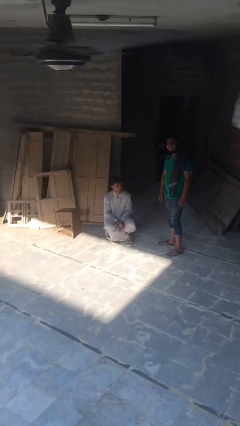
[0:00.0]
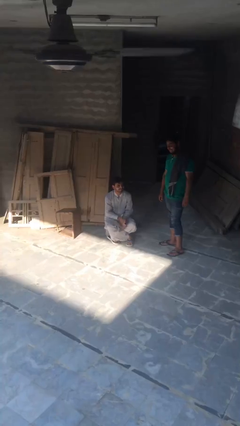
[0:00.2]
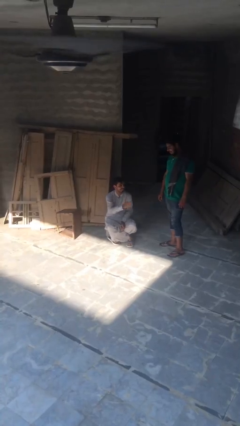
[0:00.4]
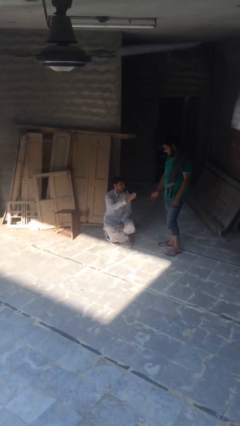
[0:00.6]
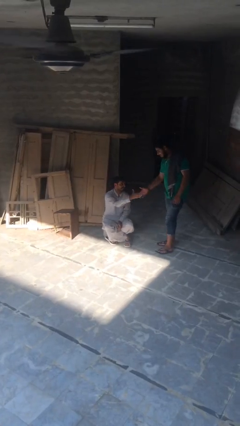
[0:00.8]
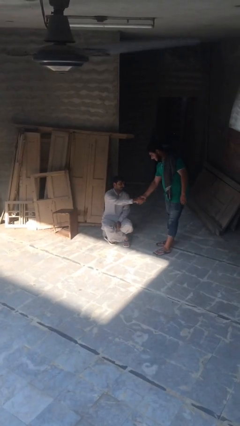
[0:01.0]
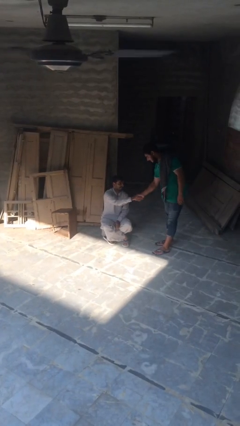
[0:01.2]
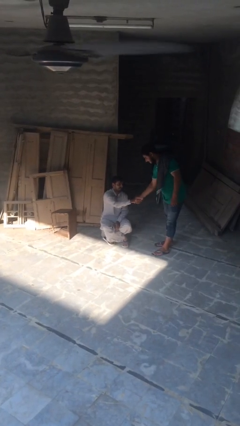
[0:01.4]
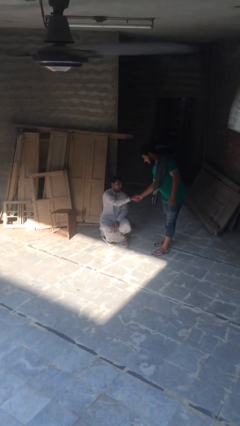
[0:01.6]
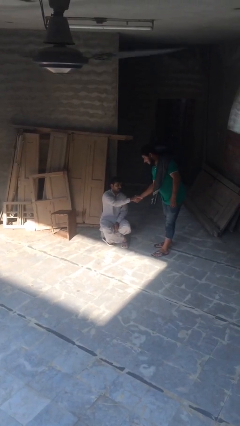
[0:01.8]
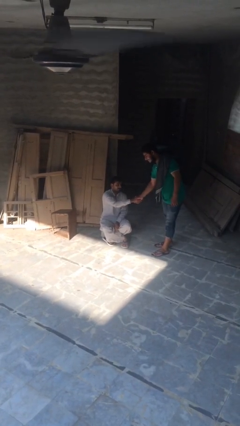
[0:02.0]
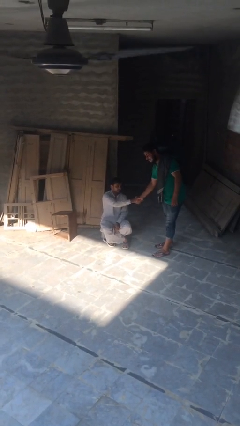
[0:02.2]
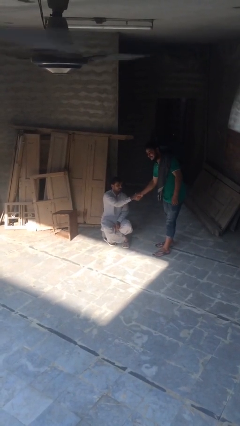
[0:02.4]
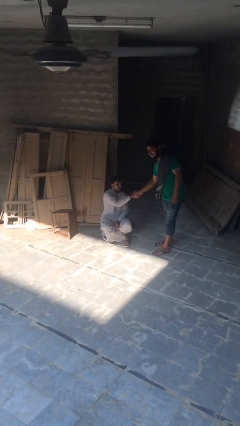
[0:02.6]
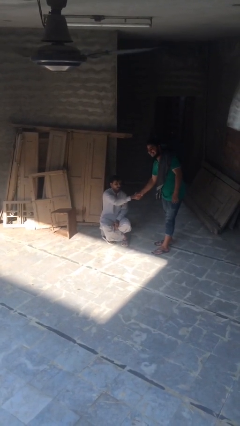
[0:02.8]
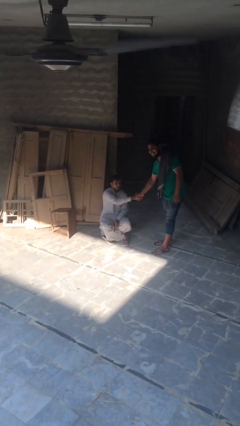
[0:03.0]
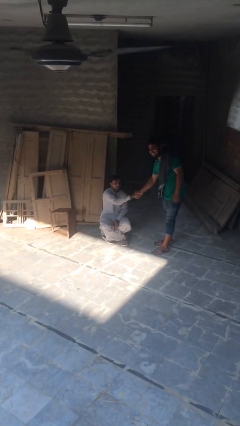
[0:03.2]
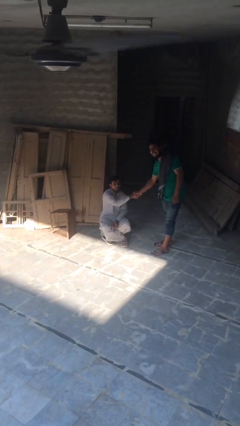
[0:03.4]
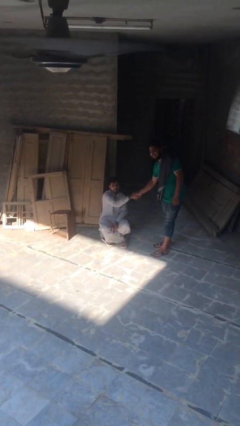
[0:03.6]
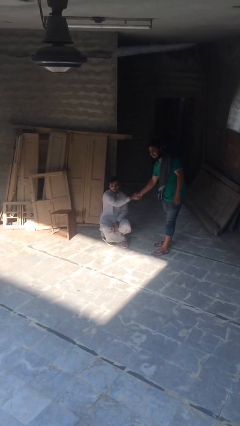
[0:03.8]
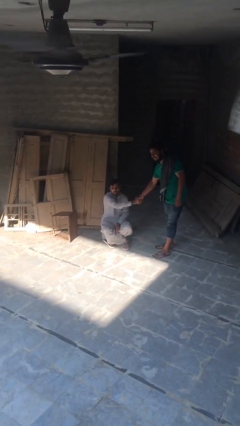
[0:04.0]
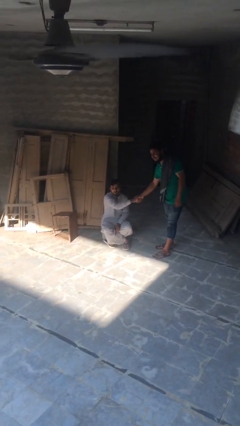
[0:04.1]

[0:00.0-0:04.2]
person shakes hand

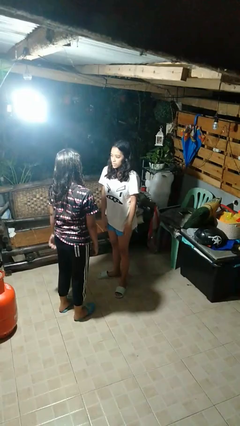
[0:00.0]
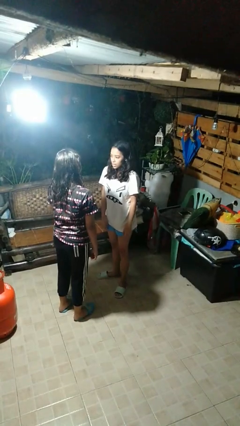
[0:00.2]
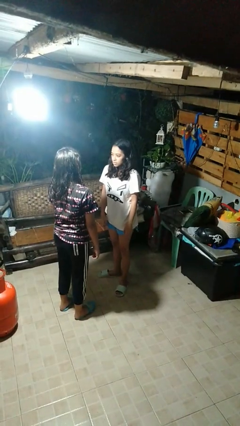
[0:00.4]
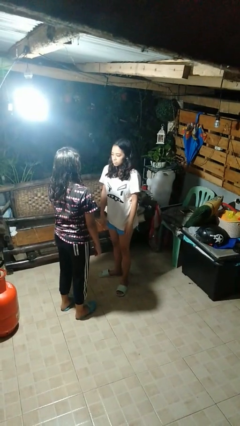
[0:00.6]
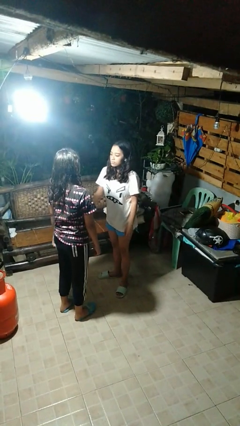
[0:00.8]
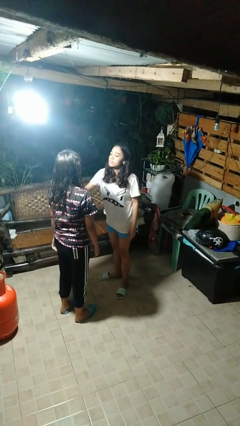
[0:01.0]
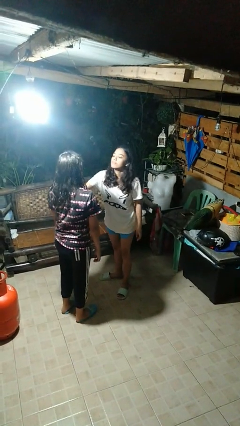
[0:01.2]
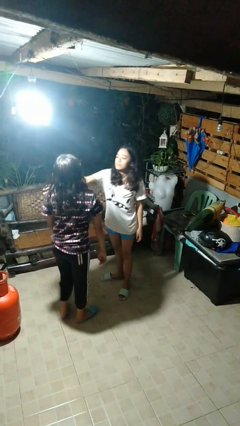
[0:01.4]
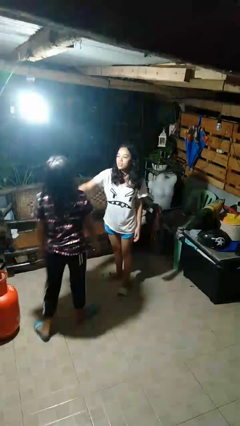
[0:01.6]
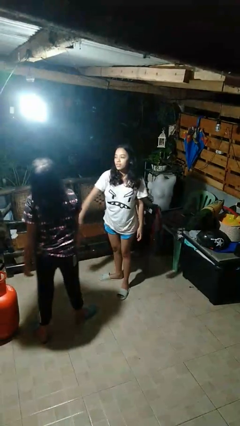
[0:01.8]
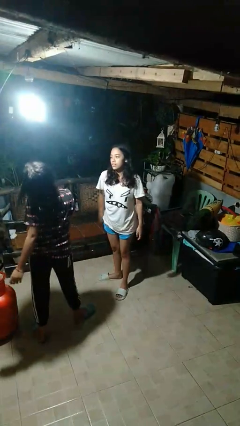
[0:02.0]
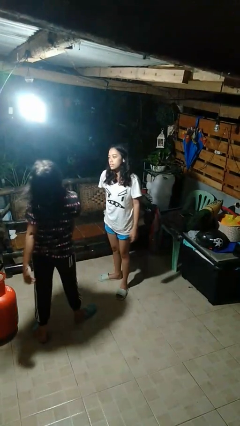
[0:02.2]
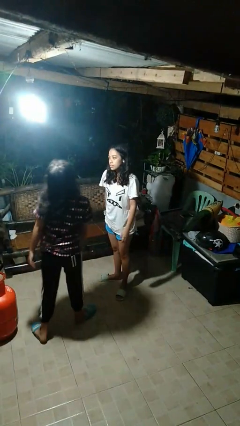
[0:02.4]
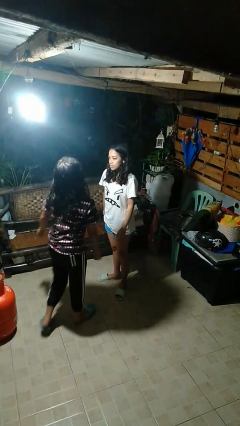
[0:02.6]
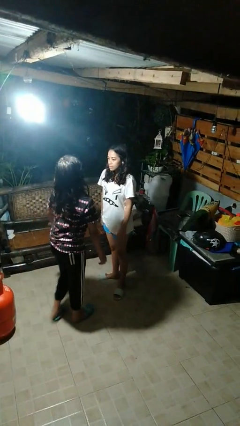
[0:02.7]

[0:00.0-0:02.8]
person shoves person

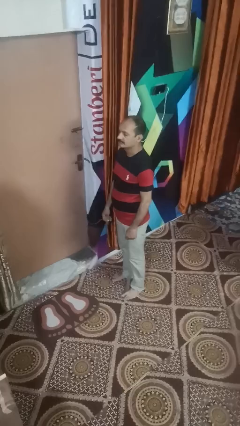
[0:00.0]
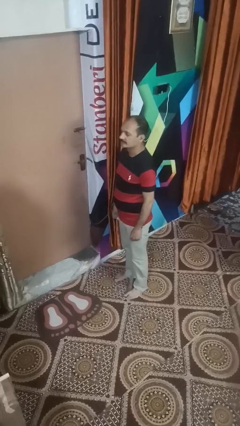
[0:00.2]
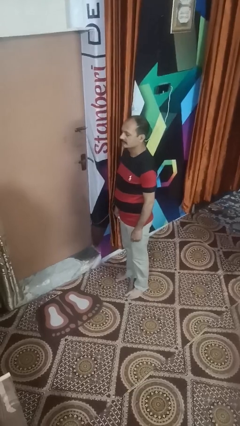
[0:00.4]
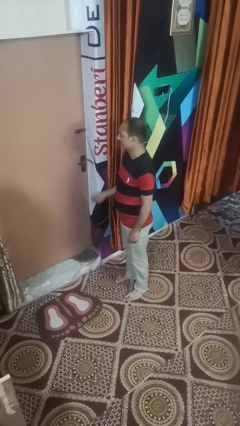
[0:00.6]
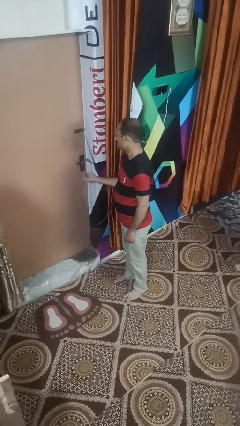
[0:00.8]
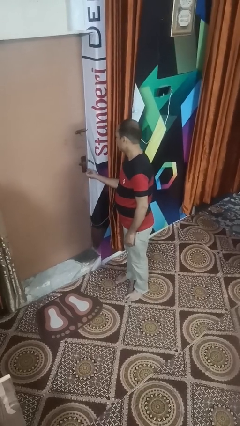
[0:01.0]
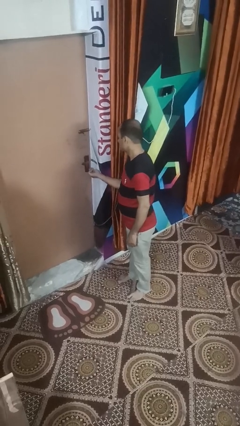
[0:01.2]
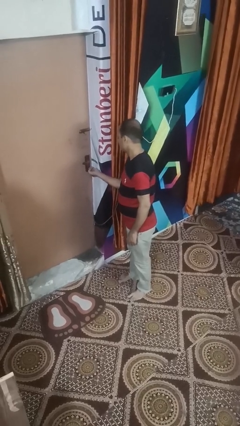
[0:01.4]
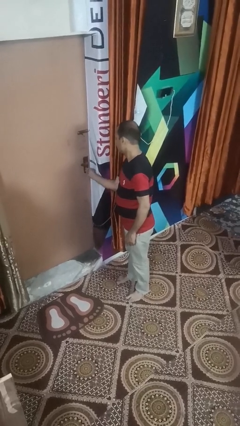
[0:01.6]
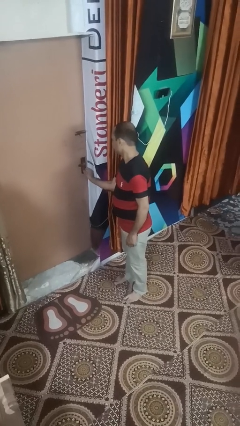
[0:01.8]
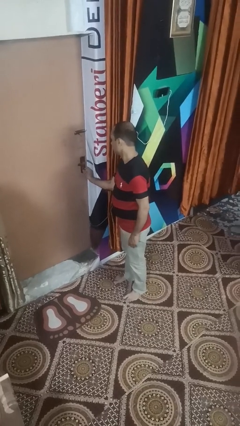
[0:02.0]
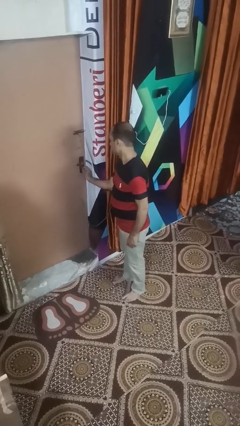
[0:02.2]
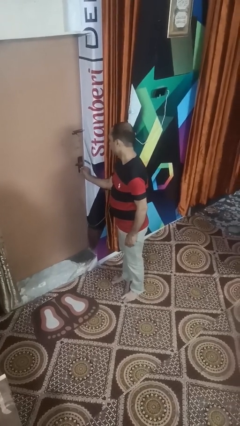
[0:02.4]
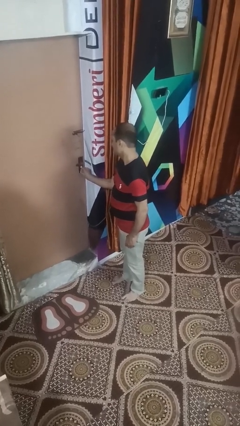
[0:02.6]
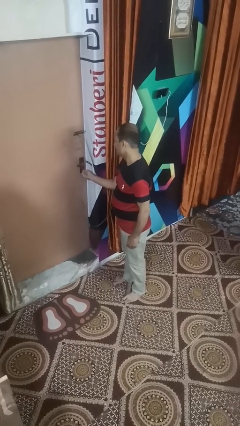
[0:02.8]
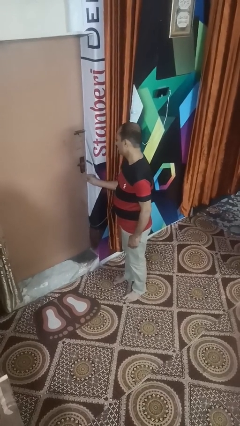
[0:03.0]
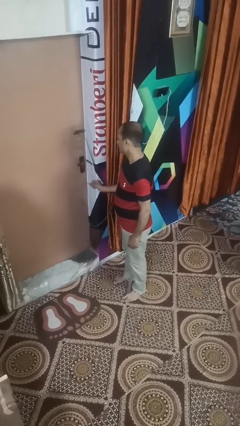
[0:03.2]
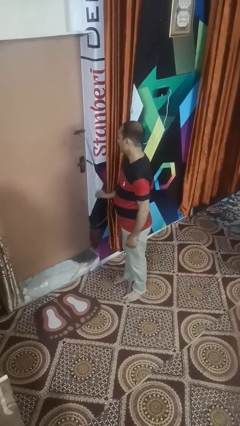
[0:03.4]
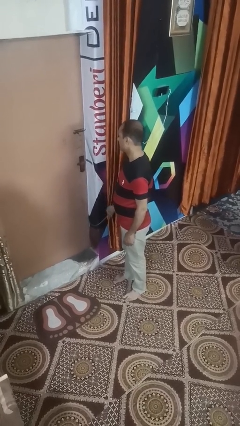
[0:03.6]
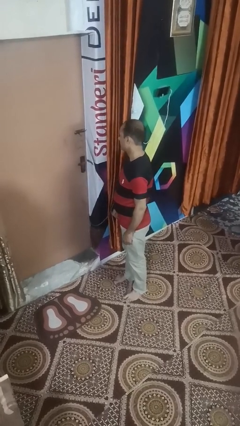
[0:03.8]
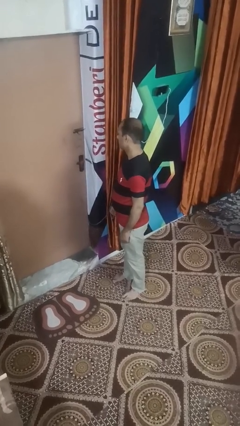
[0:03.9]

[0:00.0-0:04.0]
person unlocks door with keys

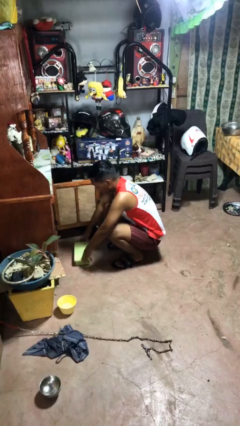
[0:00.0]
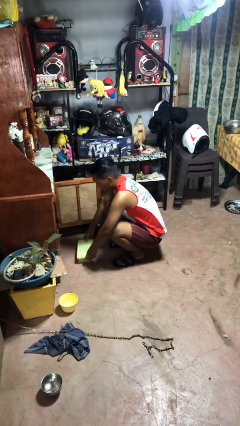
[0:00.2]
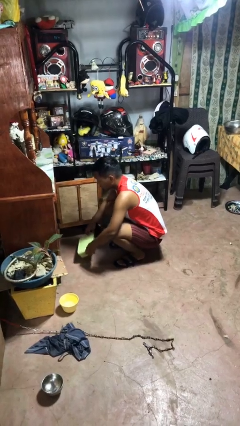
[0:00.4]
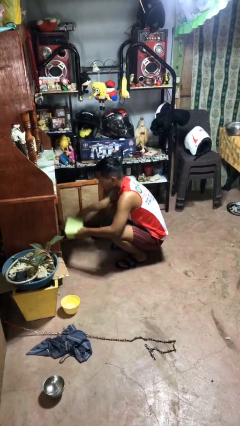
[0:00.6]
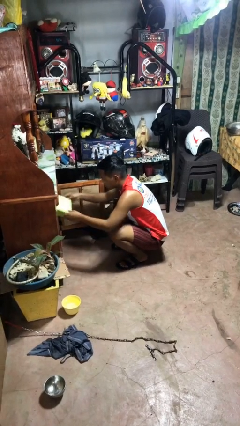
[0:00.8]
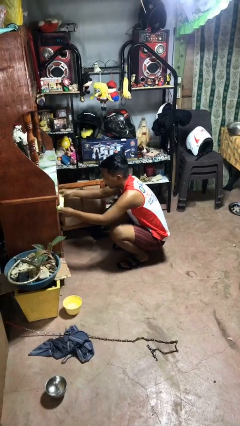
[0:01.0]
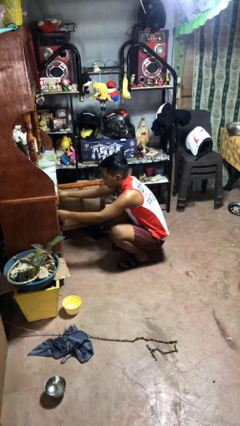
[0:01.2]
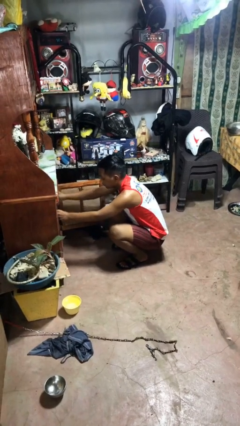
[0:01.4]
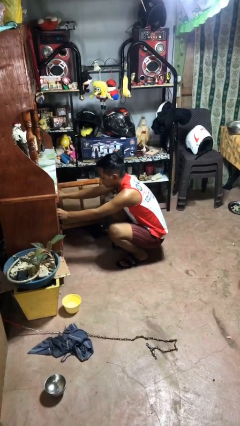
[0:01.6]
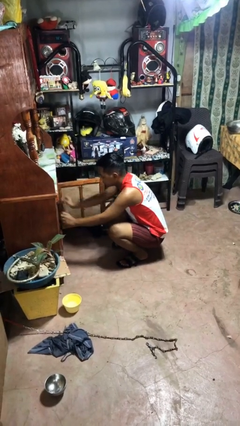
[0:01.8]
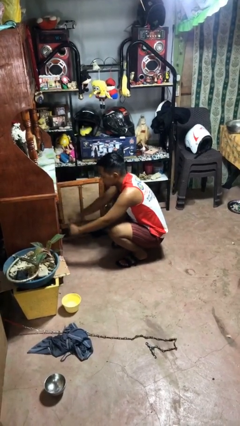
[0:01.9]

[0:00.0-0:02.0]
person puts object in cabinet

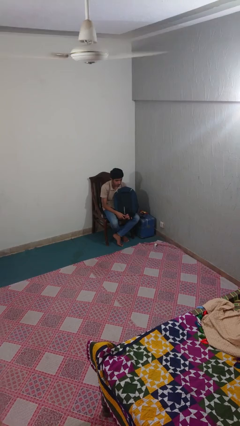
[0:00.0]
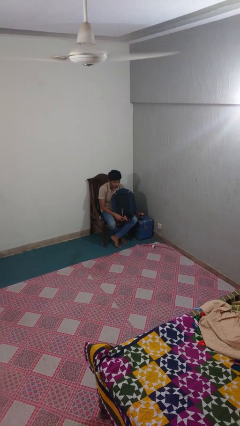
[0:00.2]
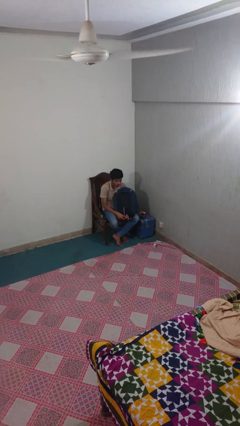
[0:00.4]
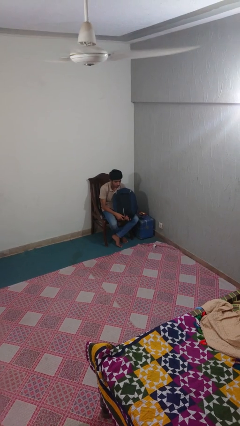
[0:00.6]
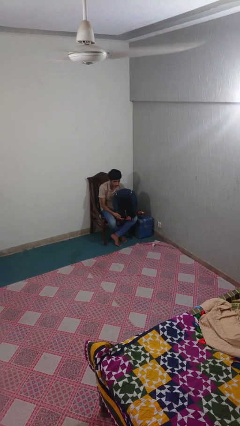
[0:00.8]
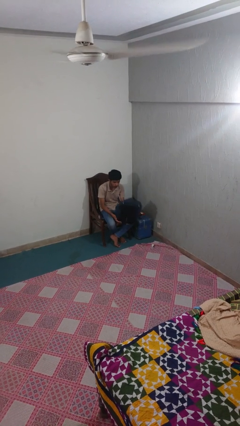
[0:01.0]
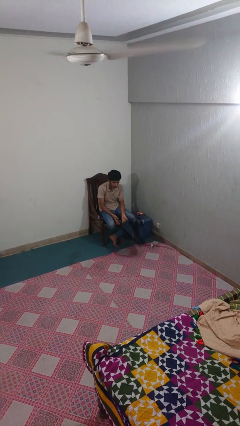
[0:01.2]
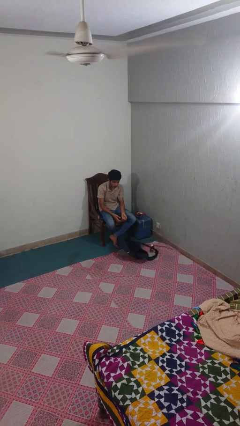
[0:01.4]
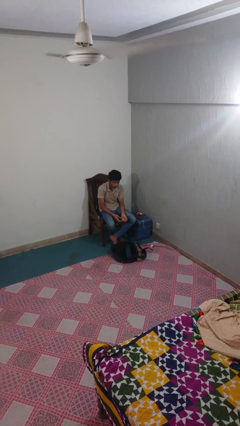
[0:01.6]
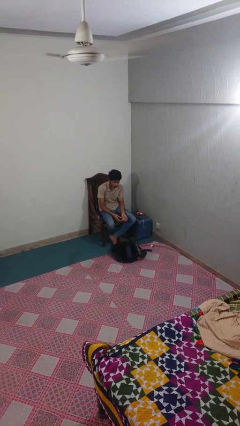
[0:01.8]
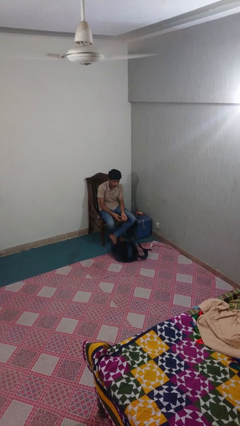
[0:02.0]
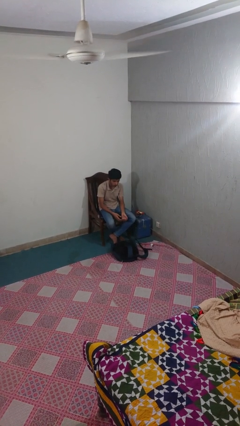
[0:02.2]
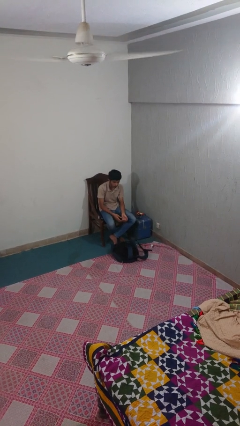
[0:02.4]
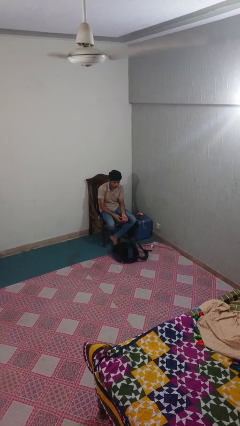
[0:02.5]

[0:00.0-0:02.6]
person drops object

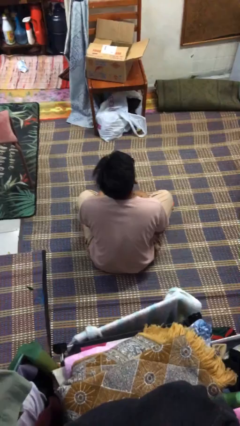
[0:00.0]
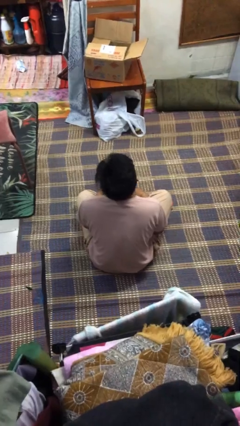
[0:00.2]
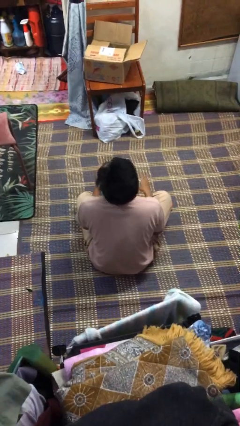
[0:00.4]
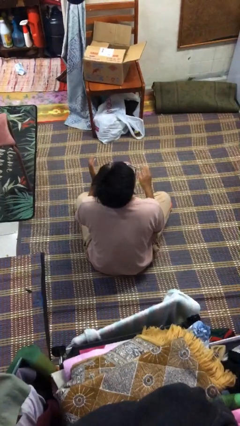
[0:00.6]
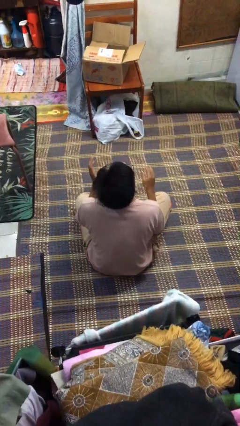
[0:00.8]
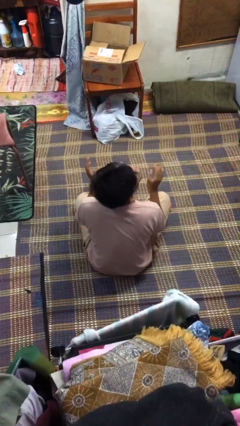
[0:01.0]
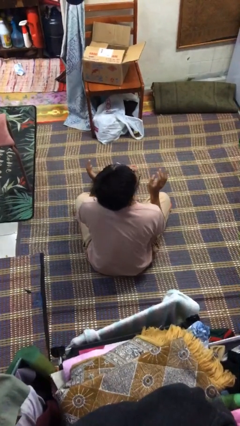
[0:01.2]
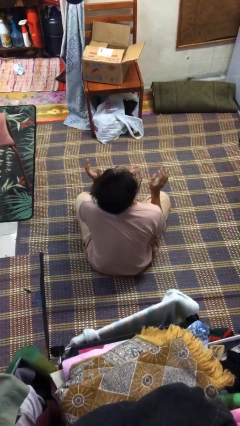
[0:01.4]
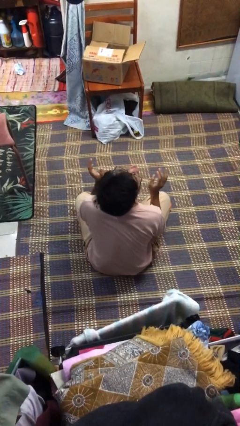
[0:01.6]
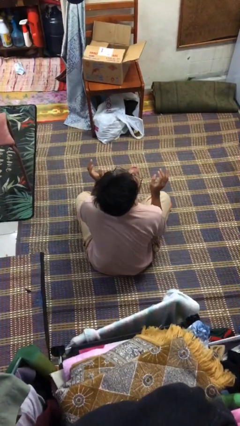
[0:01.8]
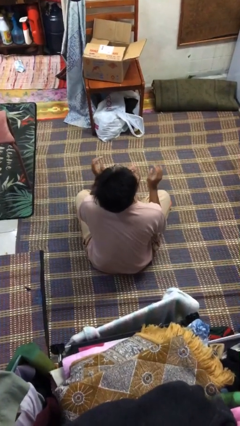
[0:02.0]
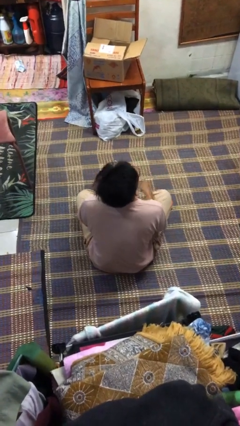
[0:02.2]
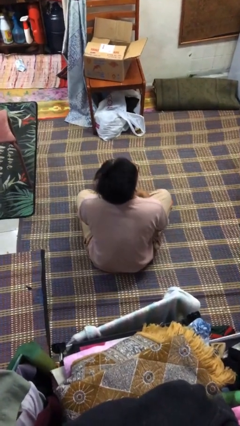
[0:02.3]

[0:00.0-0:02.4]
person sticks out tongue
